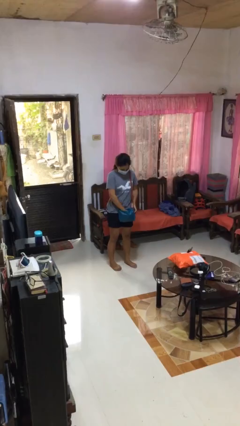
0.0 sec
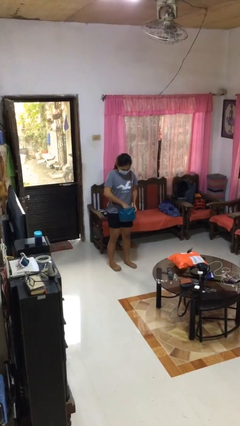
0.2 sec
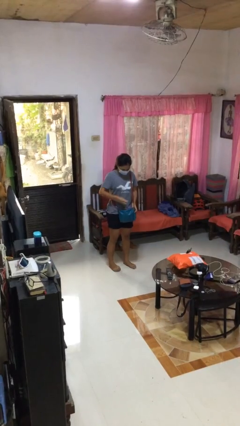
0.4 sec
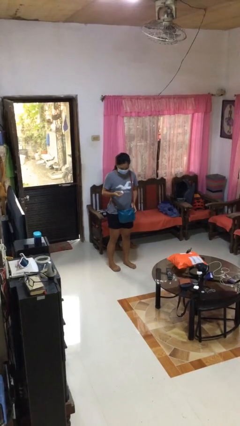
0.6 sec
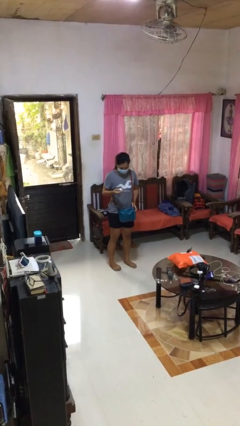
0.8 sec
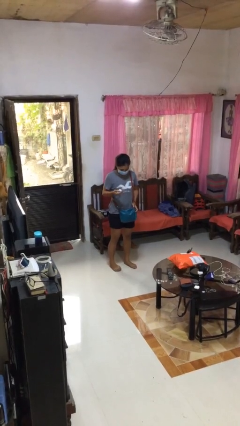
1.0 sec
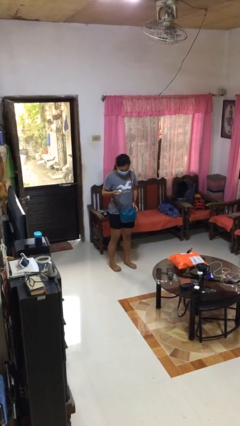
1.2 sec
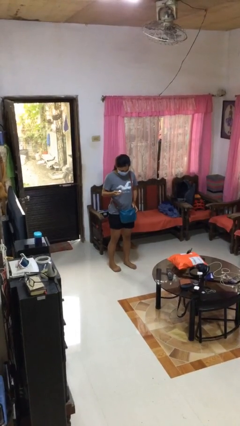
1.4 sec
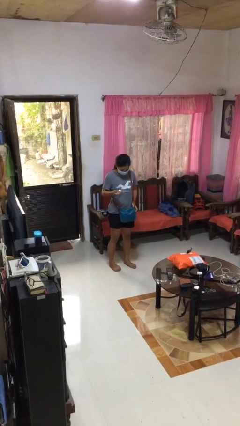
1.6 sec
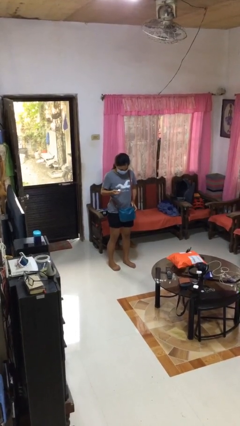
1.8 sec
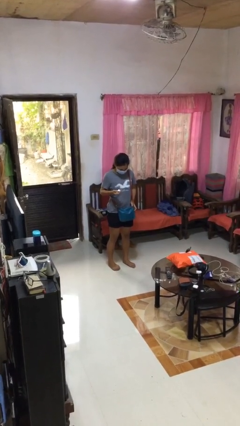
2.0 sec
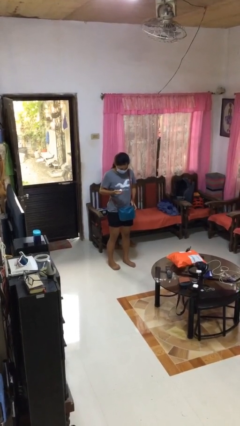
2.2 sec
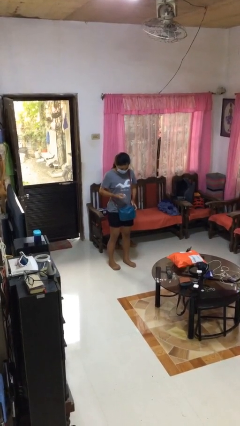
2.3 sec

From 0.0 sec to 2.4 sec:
person takes object from purse

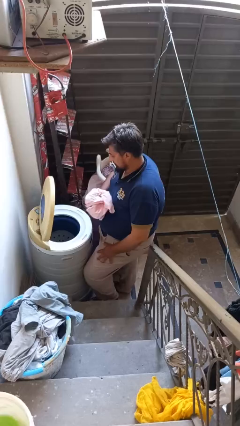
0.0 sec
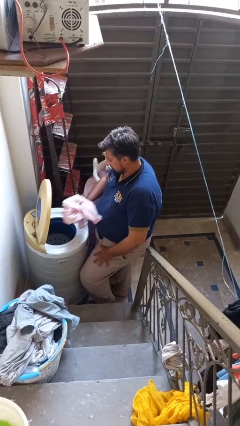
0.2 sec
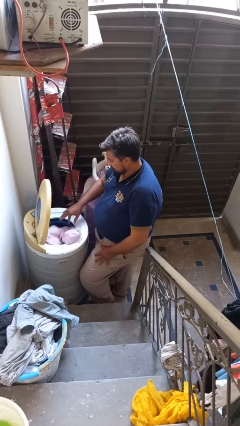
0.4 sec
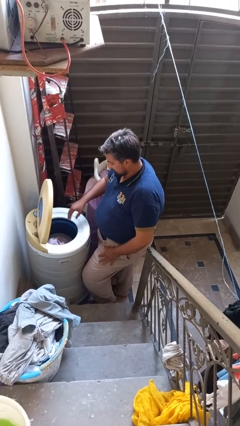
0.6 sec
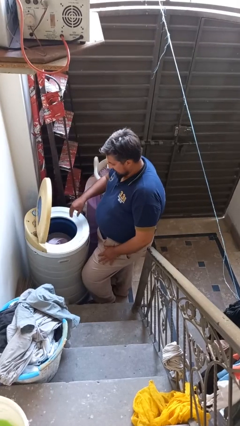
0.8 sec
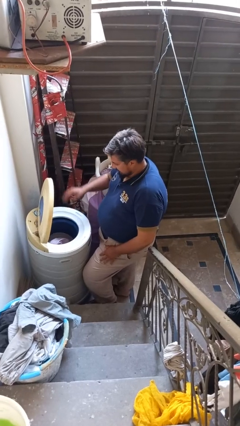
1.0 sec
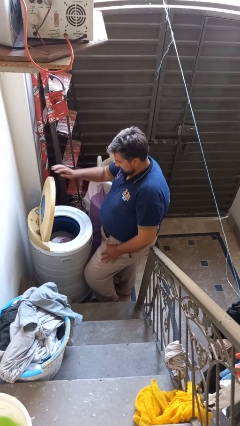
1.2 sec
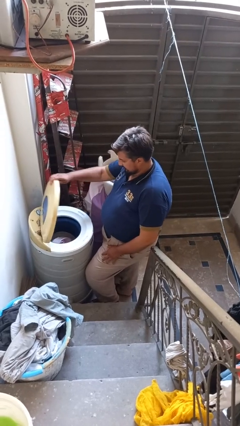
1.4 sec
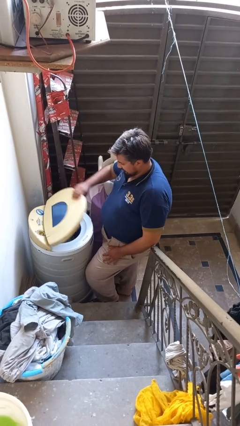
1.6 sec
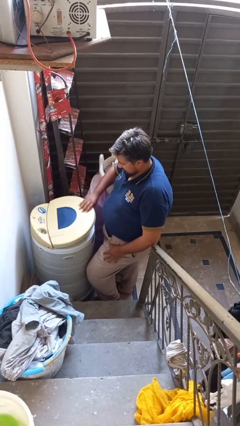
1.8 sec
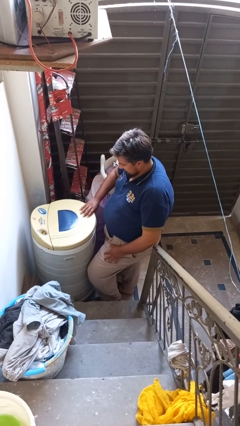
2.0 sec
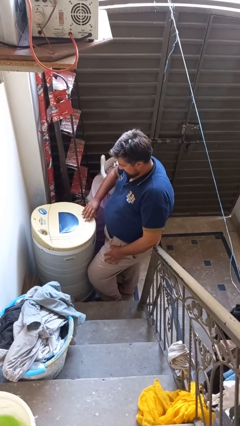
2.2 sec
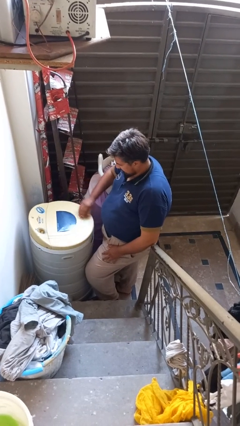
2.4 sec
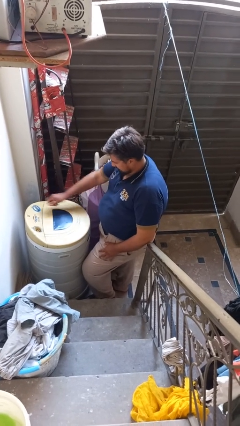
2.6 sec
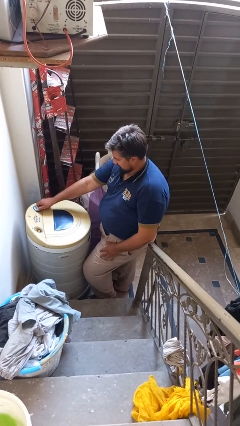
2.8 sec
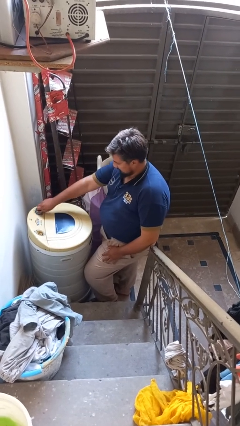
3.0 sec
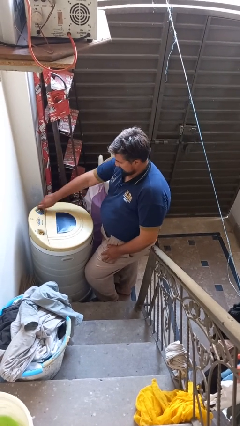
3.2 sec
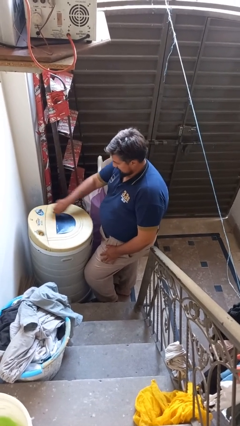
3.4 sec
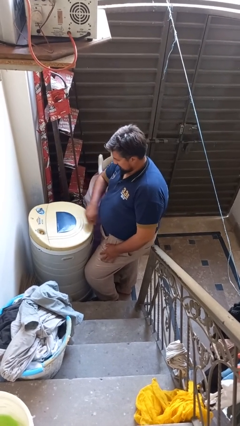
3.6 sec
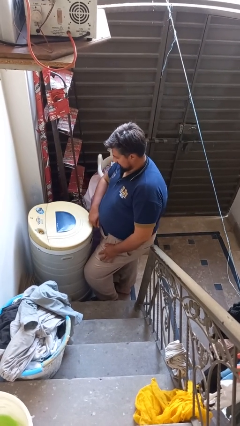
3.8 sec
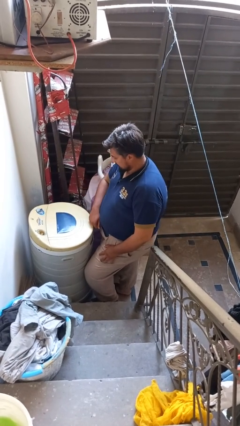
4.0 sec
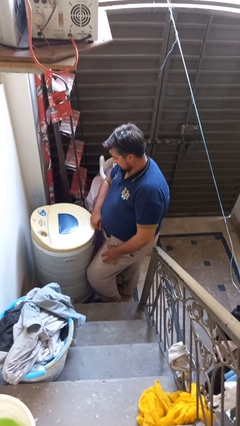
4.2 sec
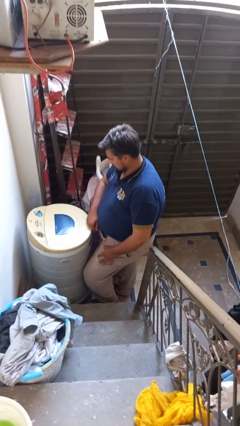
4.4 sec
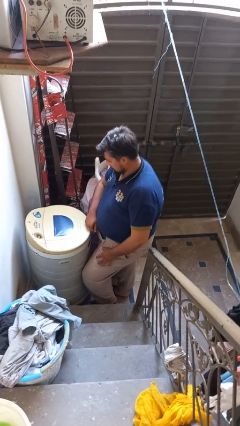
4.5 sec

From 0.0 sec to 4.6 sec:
person loads dryer

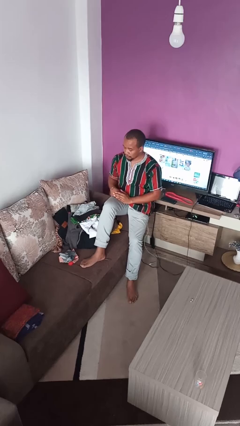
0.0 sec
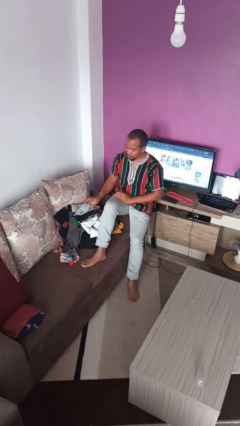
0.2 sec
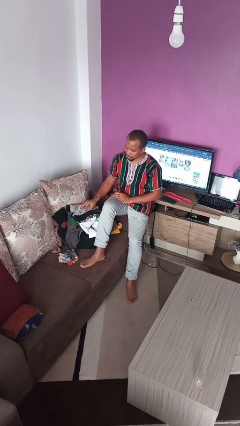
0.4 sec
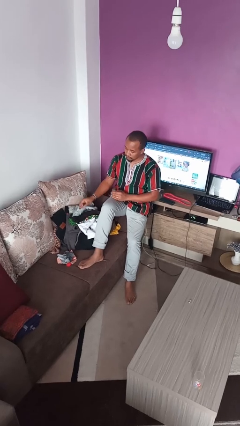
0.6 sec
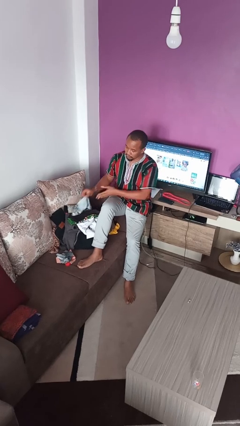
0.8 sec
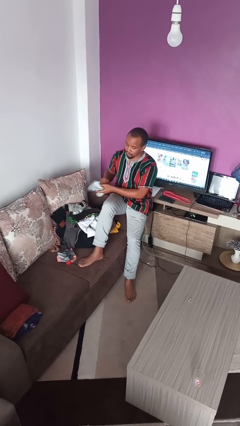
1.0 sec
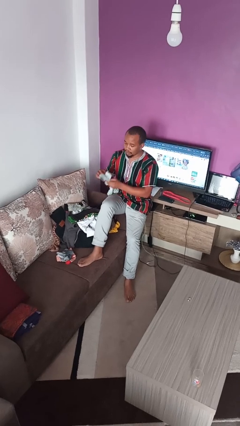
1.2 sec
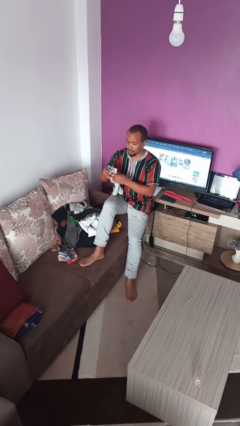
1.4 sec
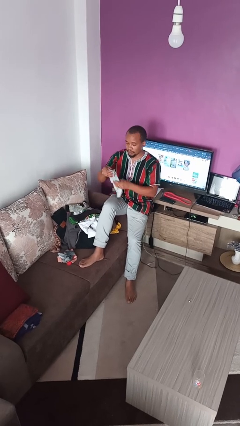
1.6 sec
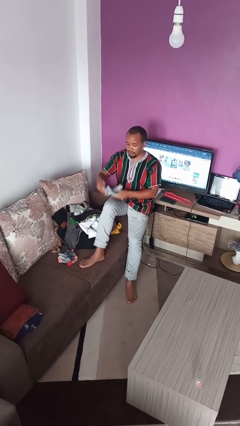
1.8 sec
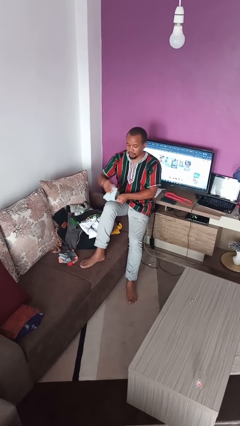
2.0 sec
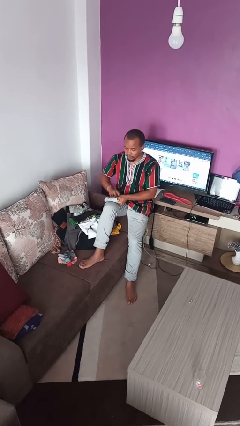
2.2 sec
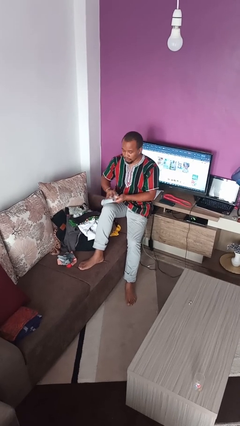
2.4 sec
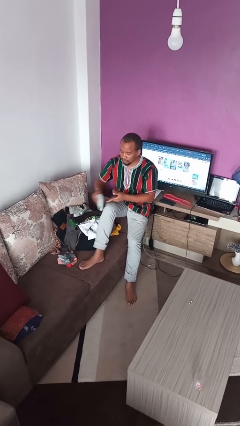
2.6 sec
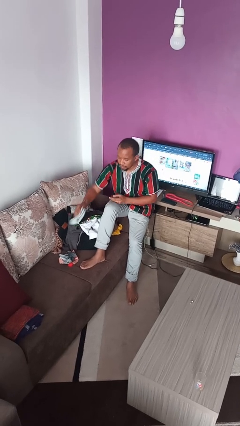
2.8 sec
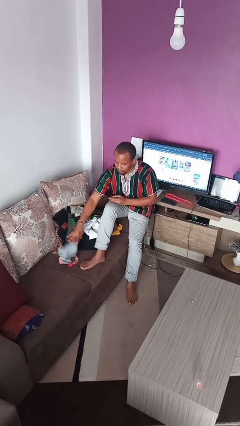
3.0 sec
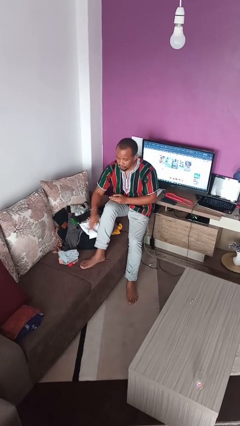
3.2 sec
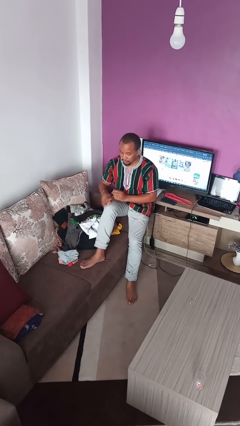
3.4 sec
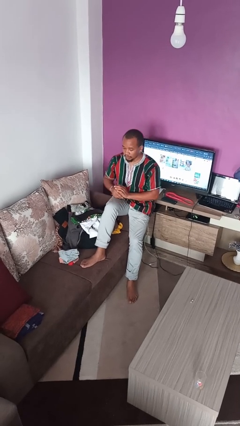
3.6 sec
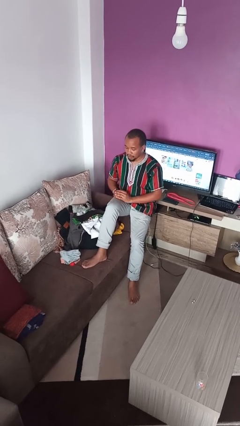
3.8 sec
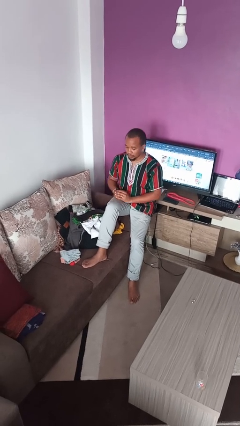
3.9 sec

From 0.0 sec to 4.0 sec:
person folds socks

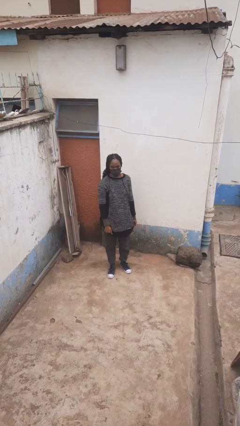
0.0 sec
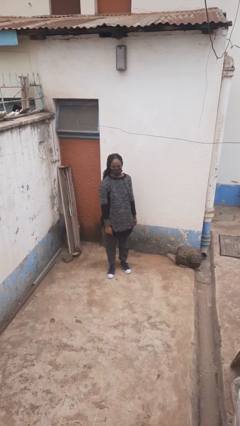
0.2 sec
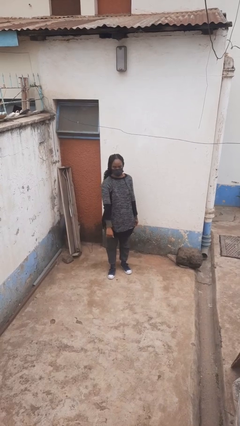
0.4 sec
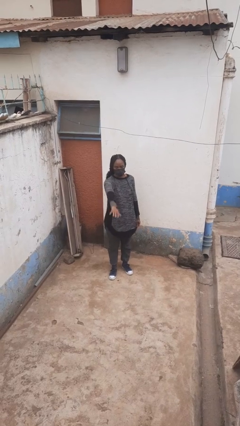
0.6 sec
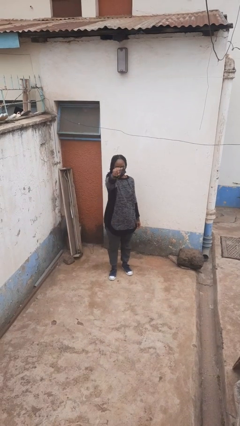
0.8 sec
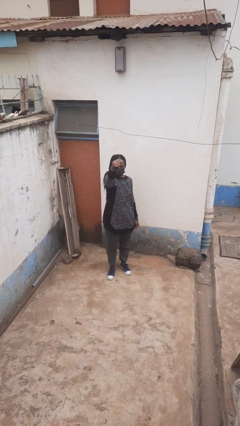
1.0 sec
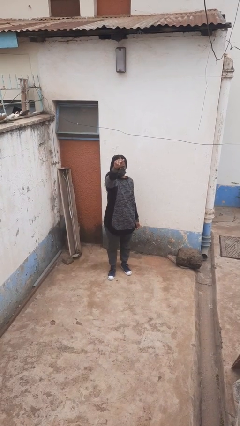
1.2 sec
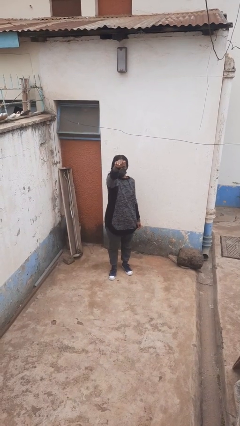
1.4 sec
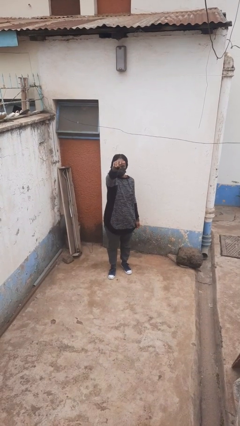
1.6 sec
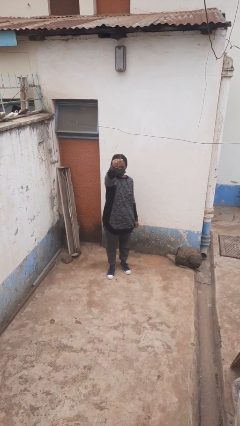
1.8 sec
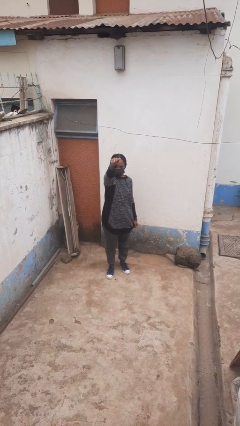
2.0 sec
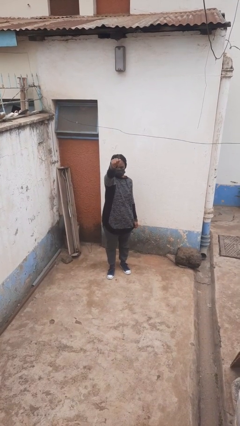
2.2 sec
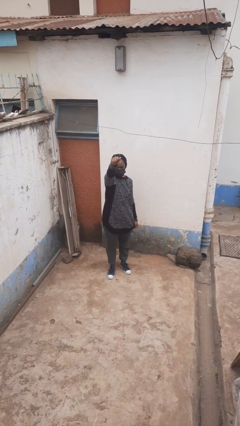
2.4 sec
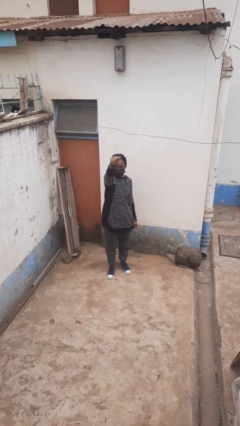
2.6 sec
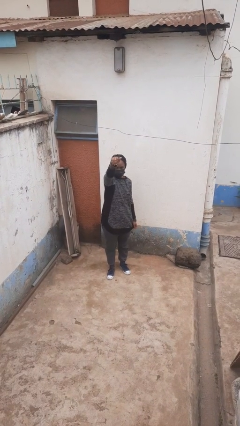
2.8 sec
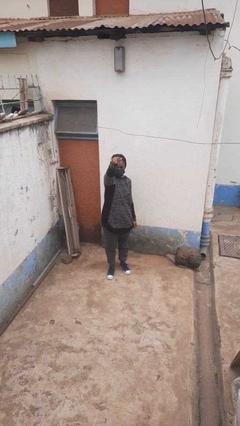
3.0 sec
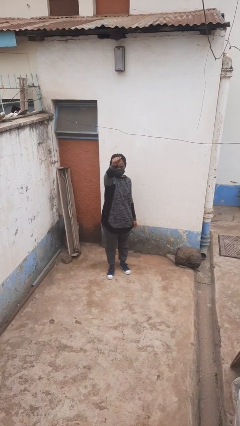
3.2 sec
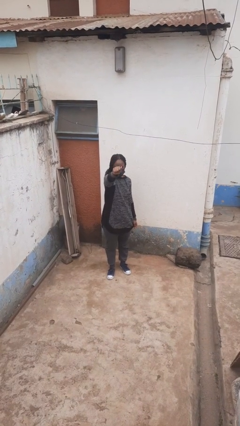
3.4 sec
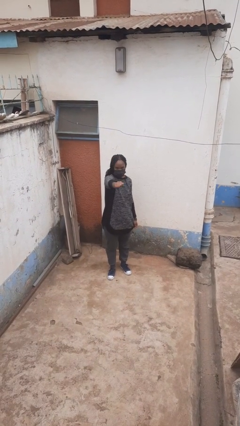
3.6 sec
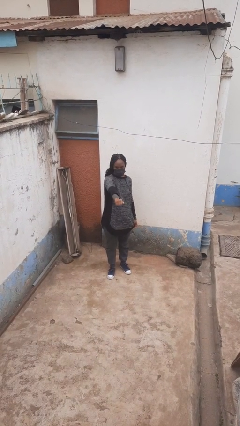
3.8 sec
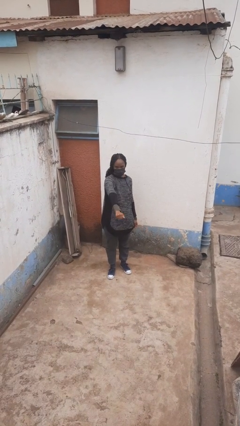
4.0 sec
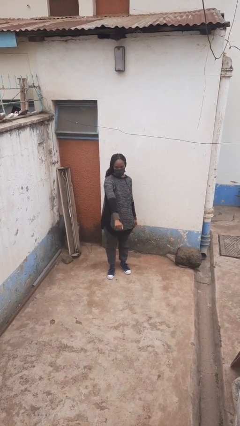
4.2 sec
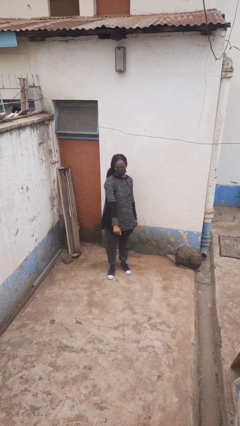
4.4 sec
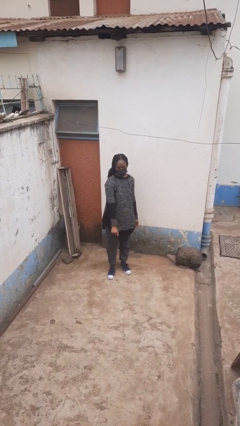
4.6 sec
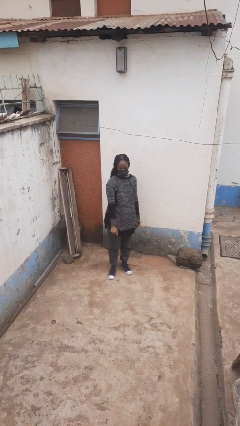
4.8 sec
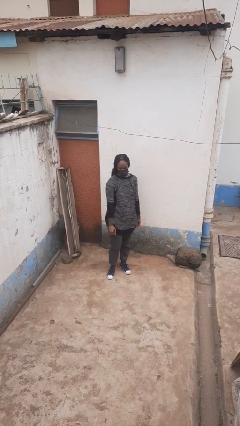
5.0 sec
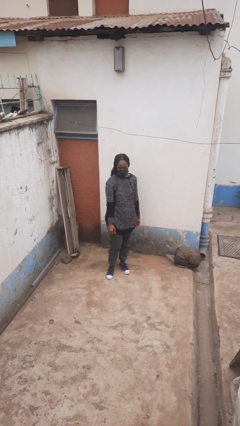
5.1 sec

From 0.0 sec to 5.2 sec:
person gestures come here

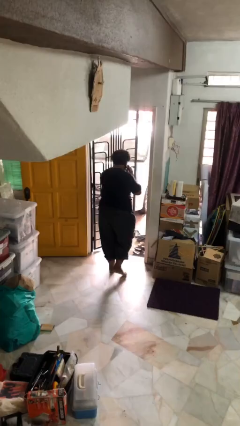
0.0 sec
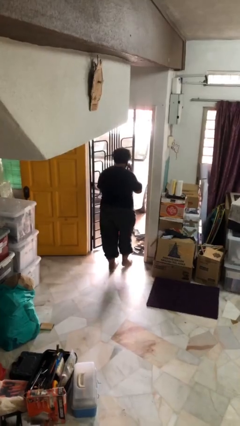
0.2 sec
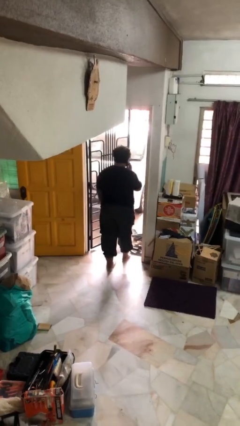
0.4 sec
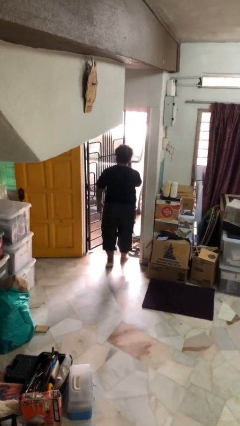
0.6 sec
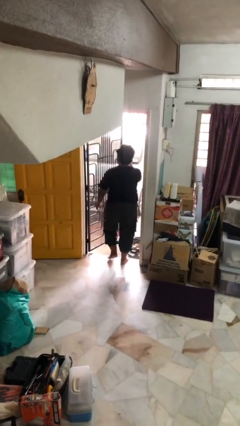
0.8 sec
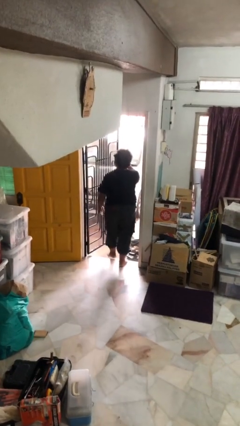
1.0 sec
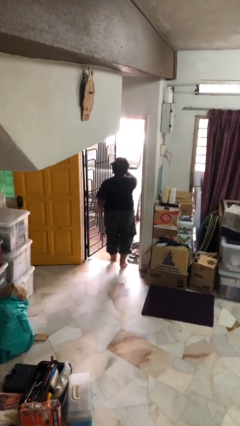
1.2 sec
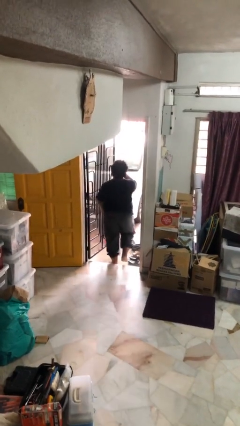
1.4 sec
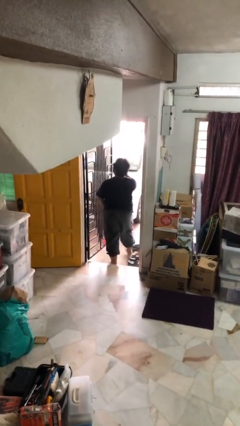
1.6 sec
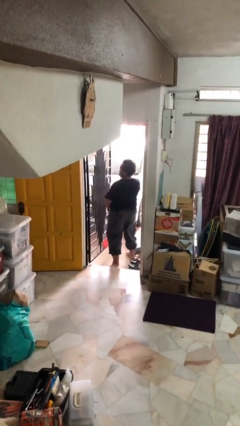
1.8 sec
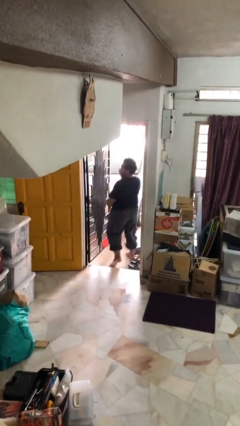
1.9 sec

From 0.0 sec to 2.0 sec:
person exits scene through structure
